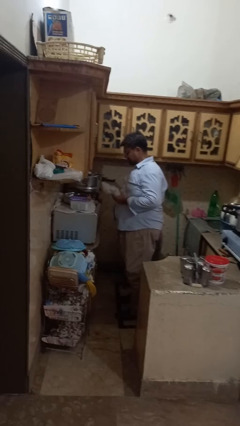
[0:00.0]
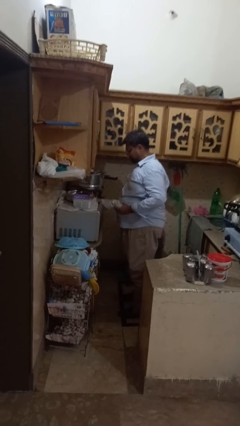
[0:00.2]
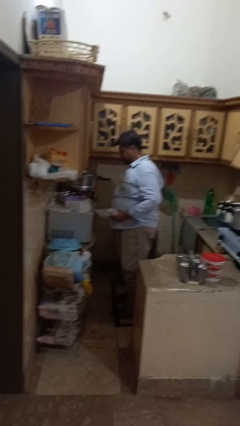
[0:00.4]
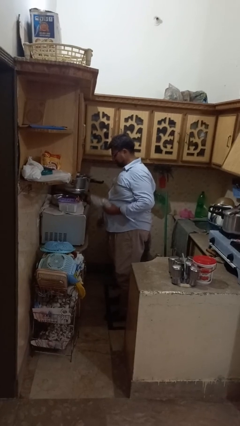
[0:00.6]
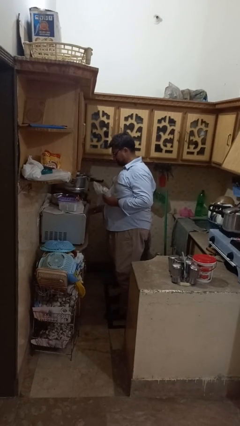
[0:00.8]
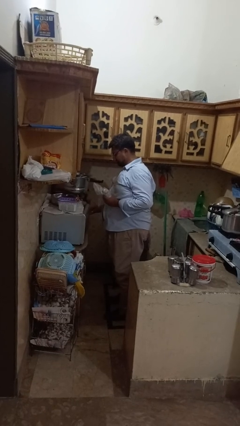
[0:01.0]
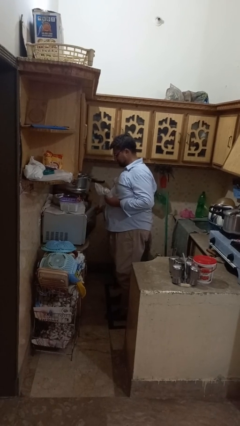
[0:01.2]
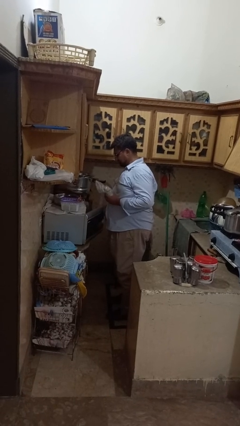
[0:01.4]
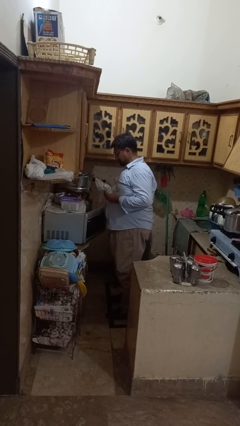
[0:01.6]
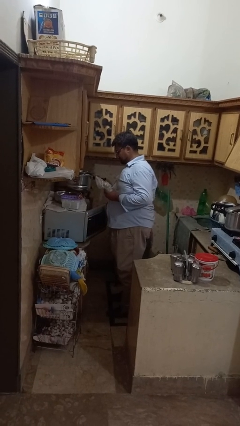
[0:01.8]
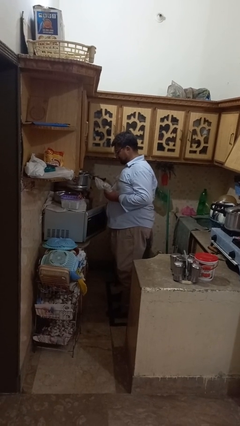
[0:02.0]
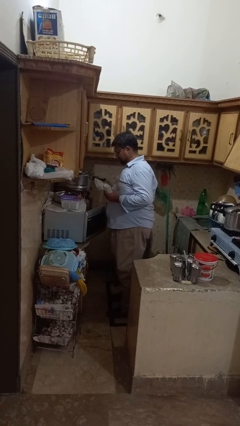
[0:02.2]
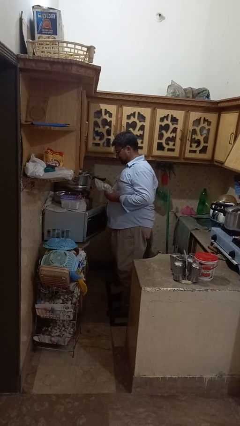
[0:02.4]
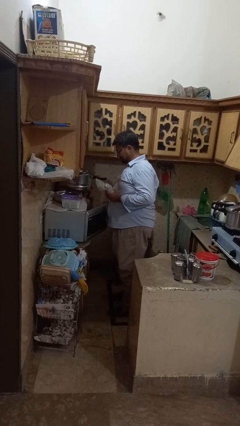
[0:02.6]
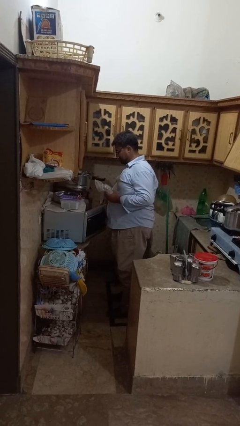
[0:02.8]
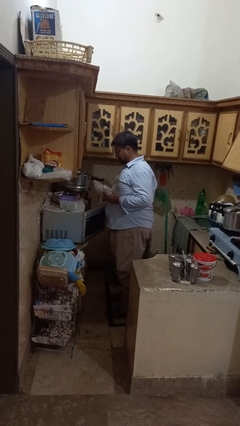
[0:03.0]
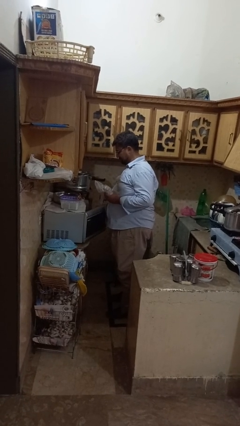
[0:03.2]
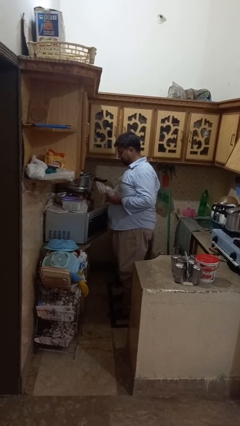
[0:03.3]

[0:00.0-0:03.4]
person opens microwave

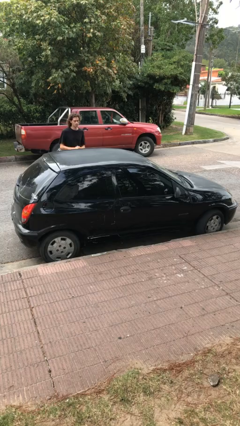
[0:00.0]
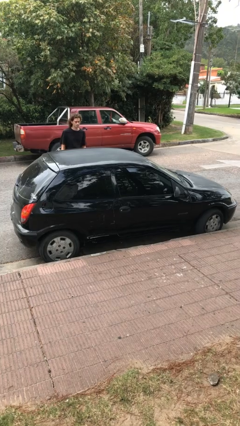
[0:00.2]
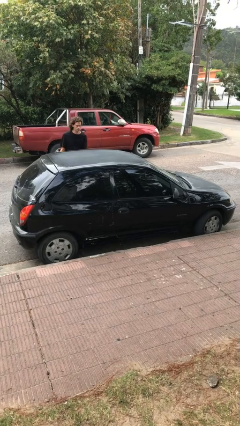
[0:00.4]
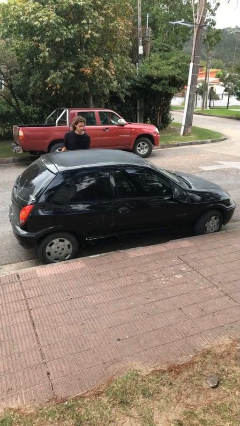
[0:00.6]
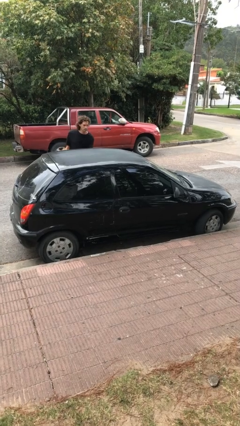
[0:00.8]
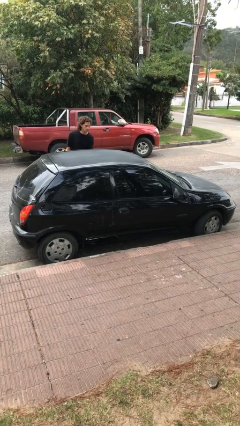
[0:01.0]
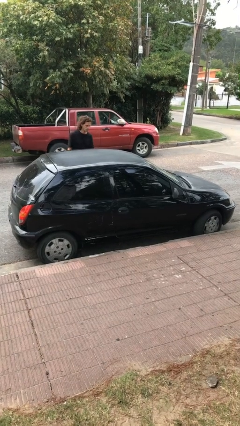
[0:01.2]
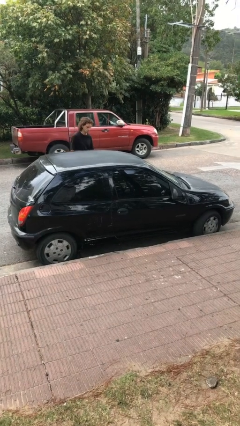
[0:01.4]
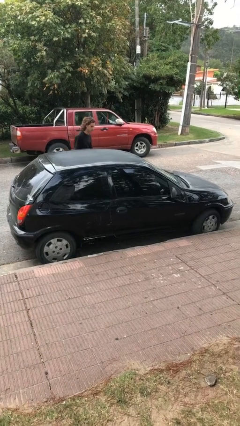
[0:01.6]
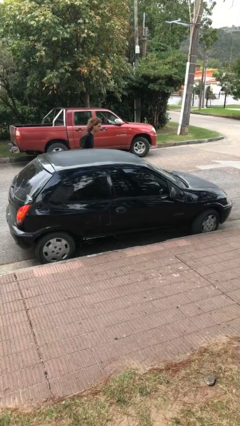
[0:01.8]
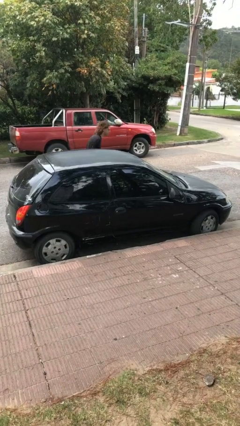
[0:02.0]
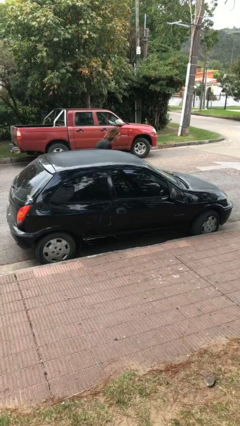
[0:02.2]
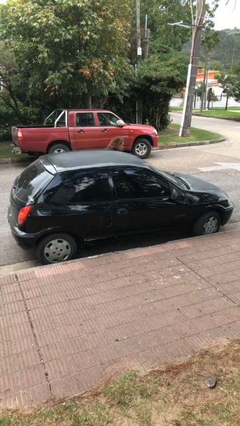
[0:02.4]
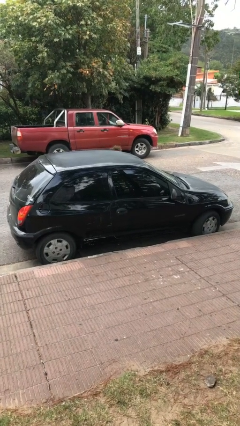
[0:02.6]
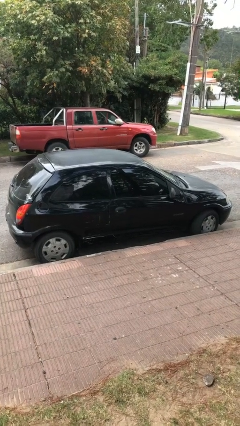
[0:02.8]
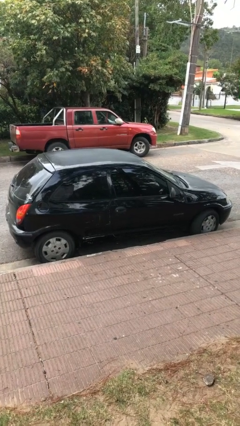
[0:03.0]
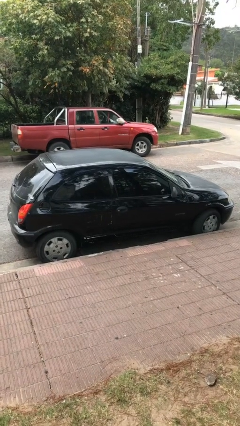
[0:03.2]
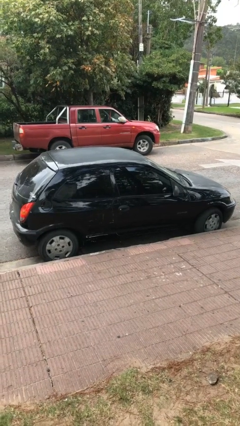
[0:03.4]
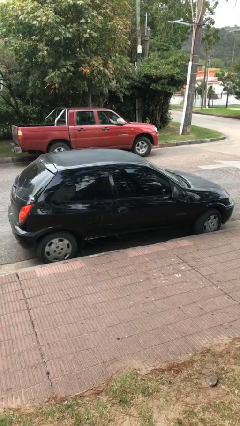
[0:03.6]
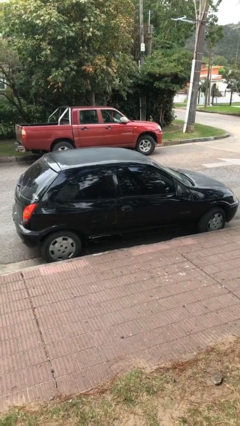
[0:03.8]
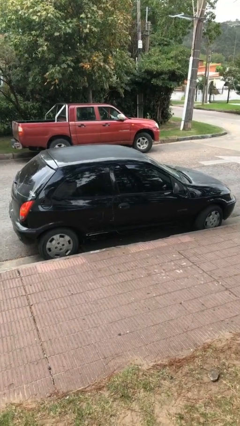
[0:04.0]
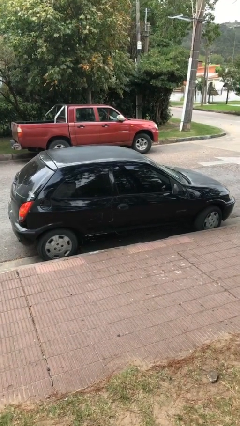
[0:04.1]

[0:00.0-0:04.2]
car picks up person

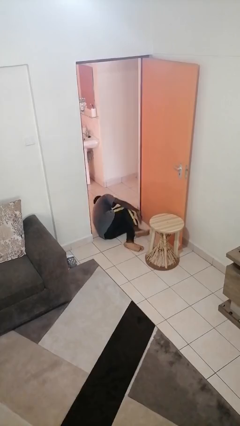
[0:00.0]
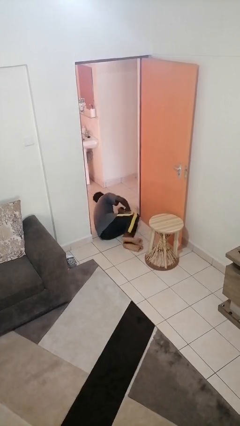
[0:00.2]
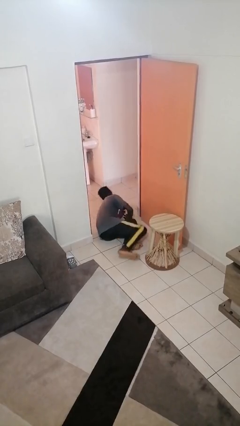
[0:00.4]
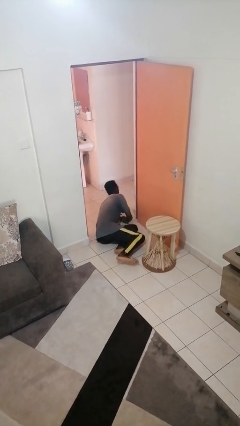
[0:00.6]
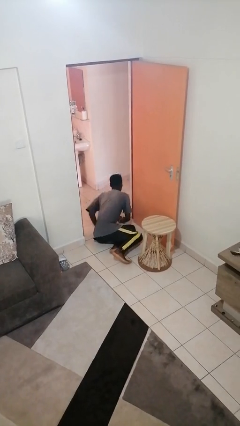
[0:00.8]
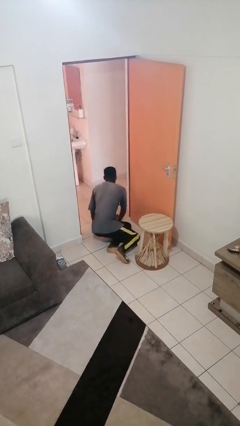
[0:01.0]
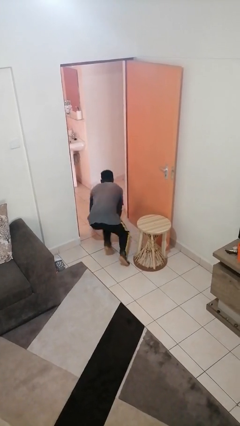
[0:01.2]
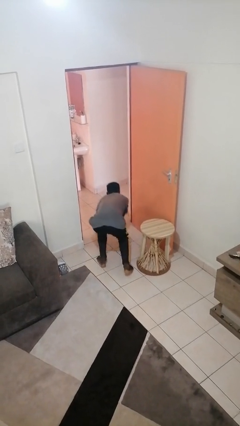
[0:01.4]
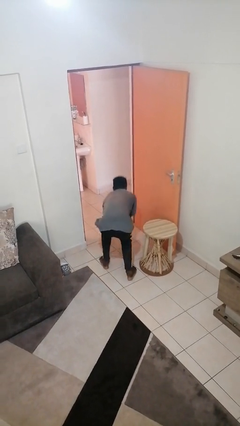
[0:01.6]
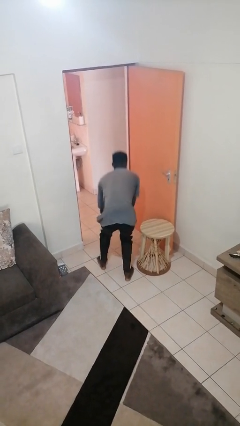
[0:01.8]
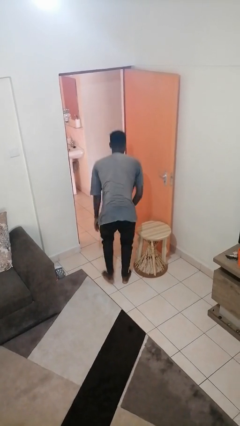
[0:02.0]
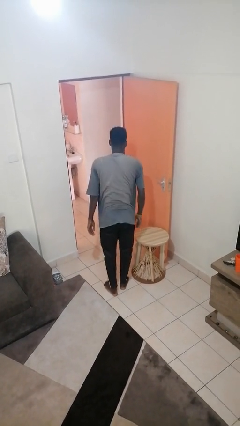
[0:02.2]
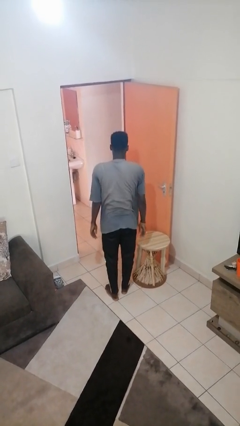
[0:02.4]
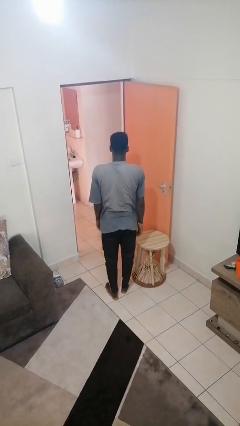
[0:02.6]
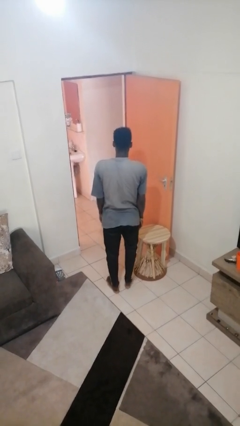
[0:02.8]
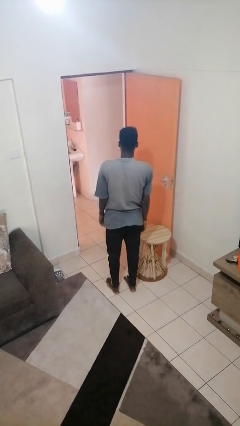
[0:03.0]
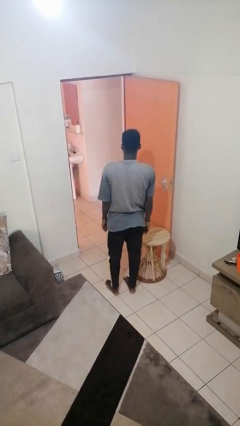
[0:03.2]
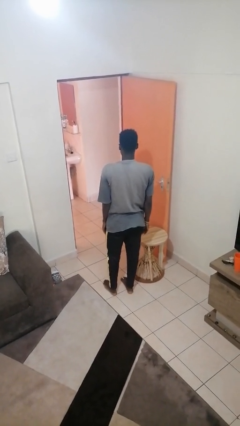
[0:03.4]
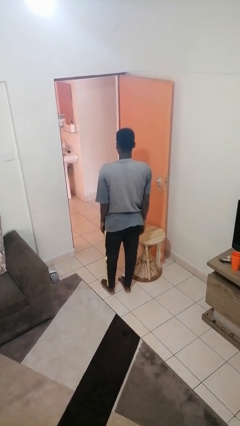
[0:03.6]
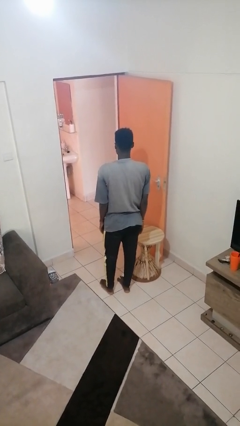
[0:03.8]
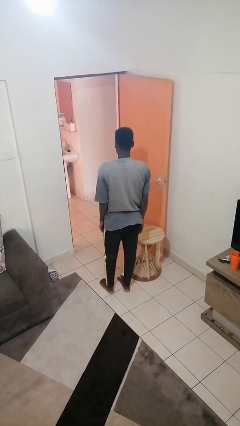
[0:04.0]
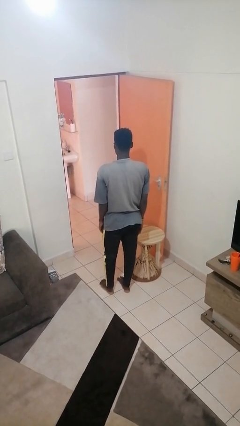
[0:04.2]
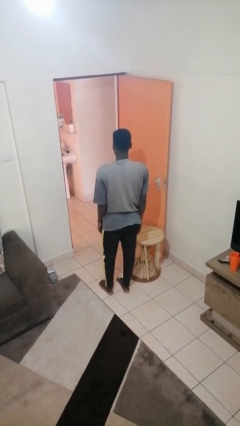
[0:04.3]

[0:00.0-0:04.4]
person stands up from floor

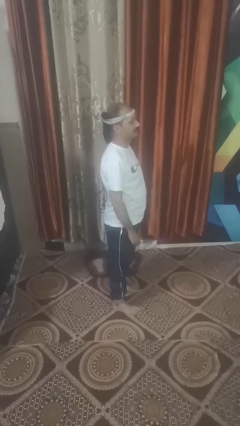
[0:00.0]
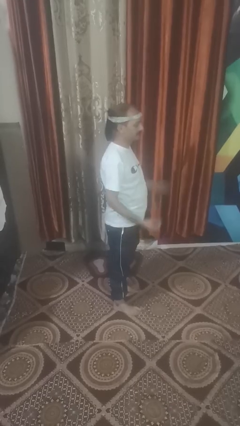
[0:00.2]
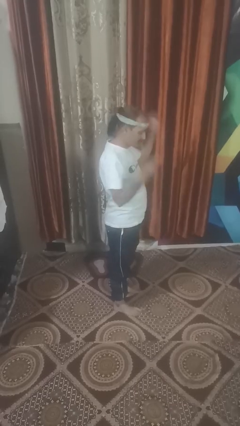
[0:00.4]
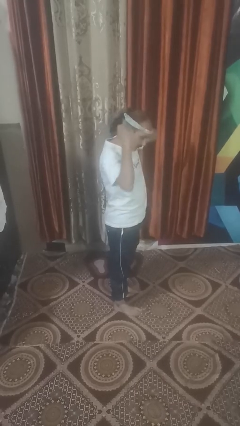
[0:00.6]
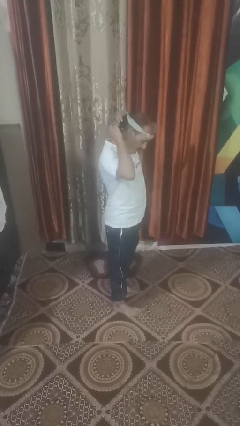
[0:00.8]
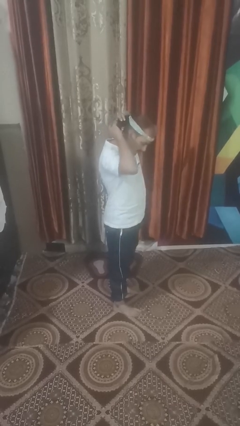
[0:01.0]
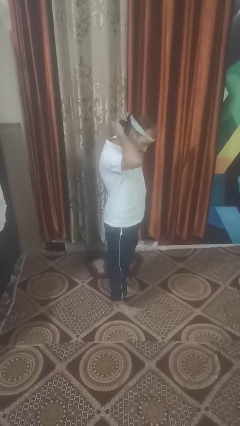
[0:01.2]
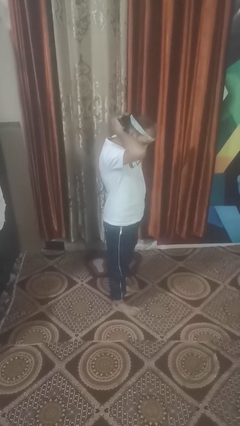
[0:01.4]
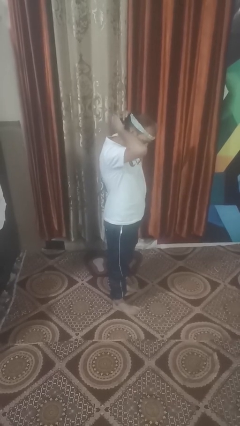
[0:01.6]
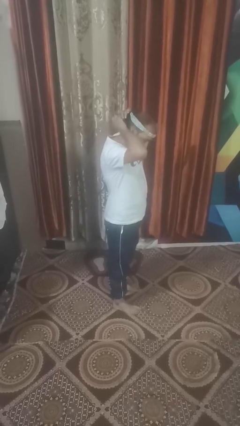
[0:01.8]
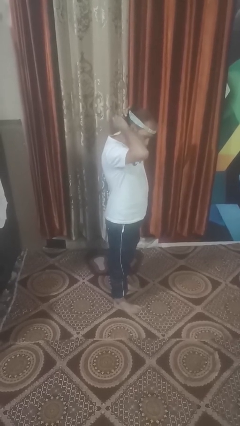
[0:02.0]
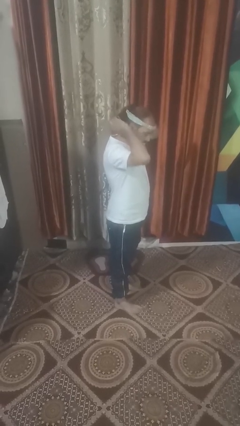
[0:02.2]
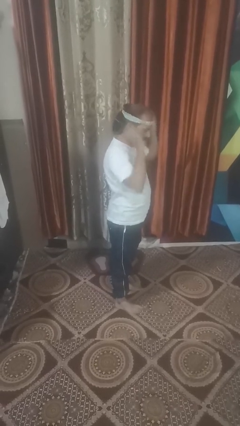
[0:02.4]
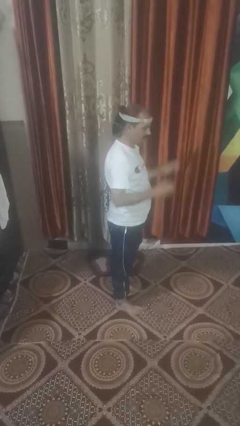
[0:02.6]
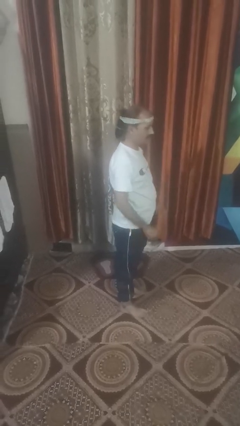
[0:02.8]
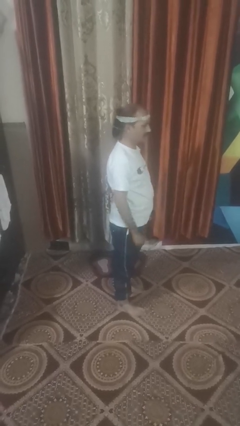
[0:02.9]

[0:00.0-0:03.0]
person puts hair in ponytail

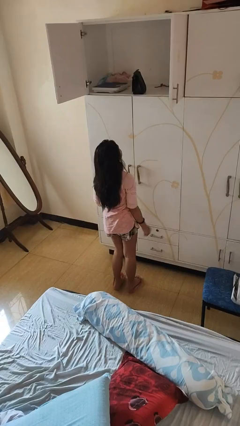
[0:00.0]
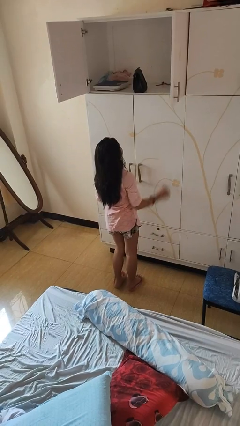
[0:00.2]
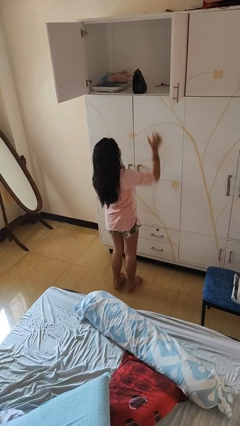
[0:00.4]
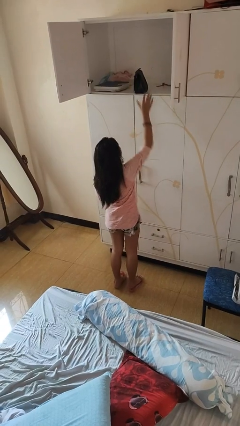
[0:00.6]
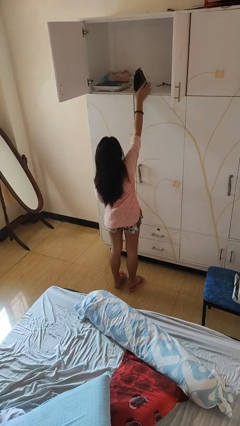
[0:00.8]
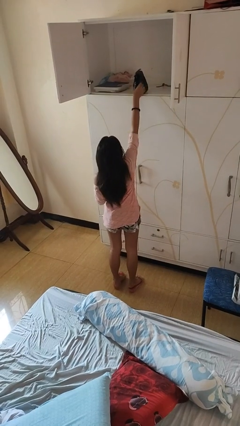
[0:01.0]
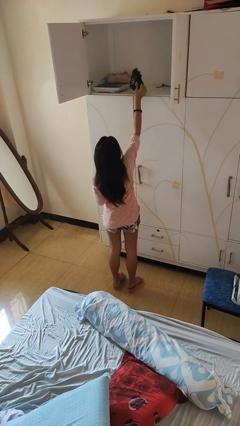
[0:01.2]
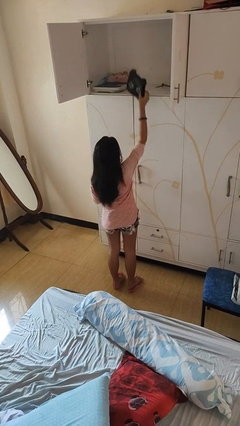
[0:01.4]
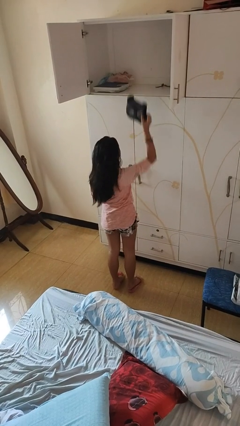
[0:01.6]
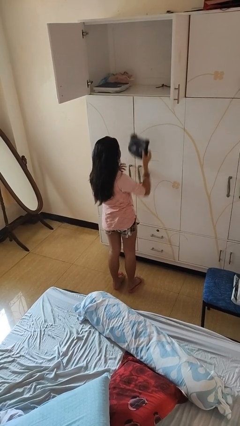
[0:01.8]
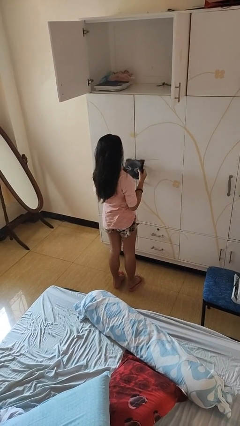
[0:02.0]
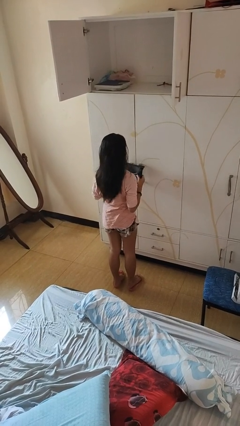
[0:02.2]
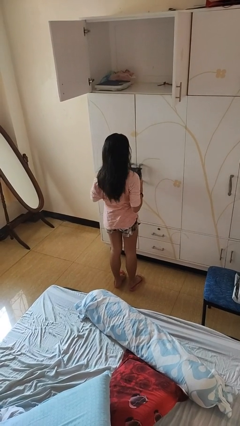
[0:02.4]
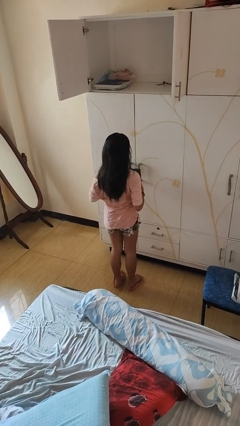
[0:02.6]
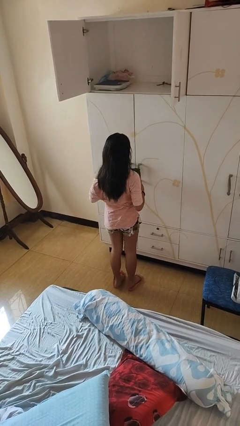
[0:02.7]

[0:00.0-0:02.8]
person picks up object from shelf
